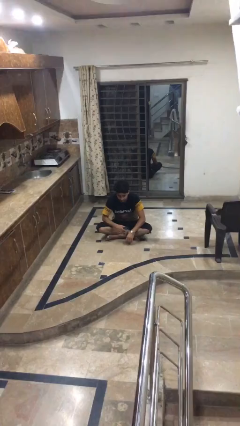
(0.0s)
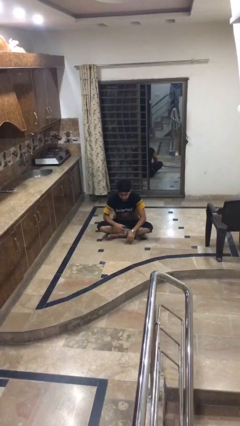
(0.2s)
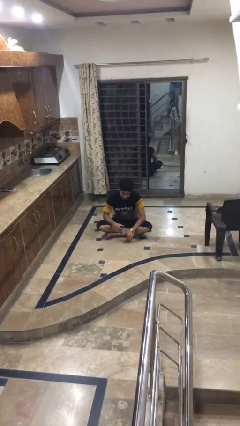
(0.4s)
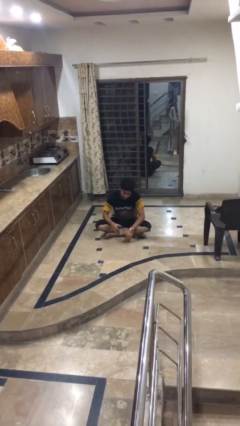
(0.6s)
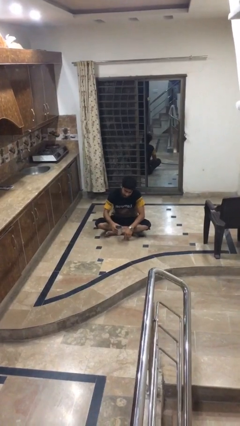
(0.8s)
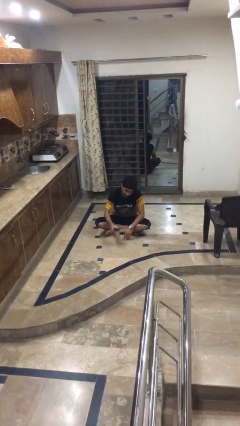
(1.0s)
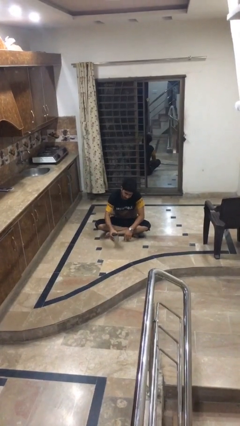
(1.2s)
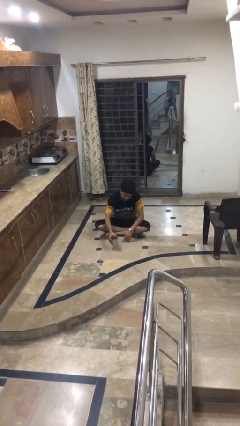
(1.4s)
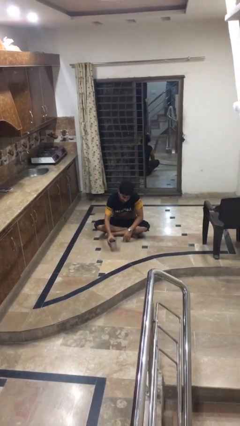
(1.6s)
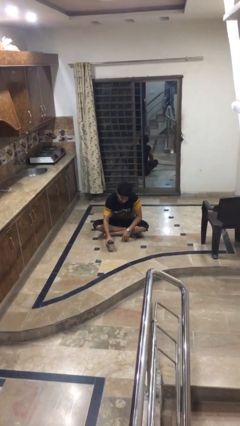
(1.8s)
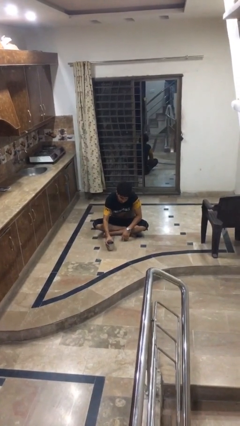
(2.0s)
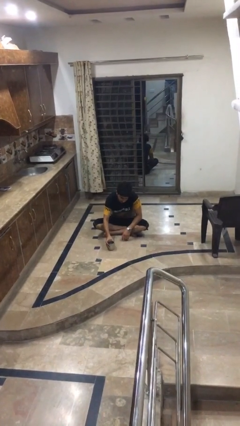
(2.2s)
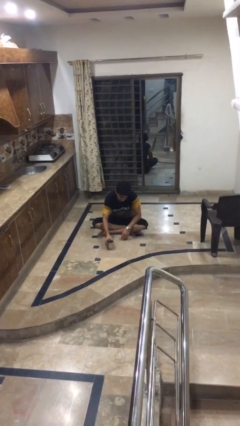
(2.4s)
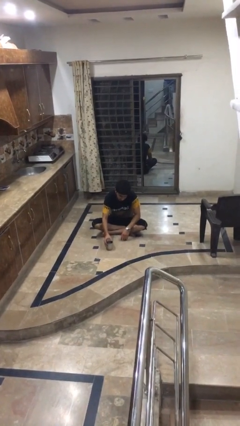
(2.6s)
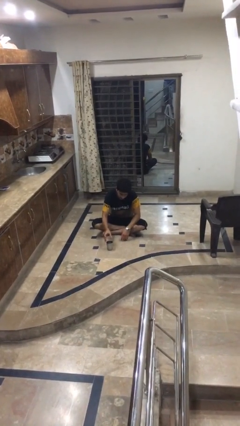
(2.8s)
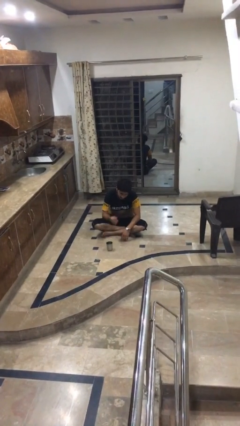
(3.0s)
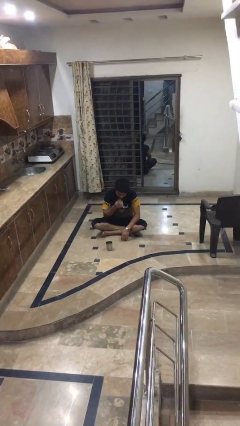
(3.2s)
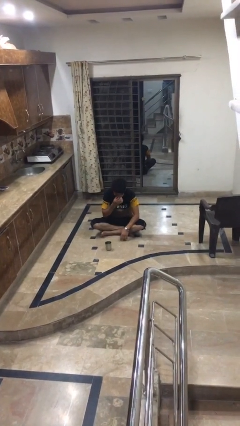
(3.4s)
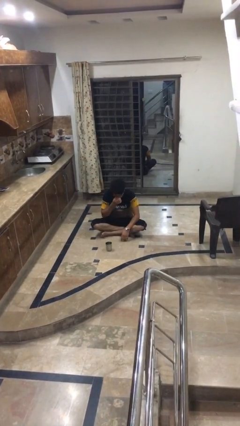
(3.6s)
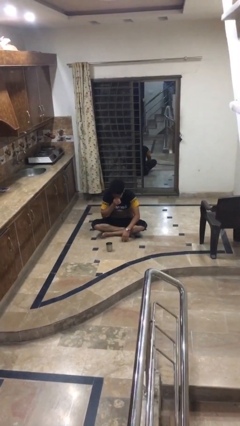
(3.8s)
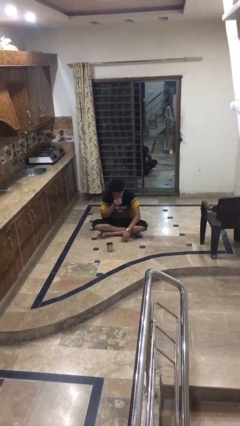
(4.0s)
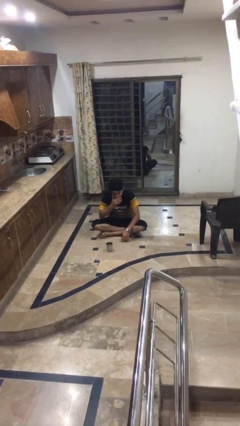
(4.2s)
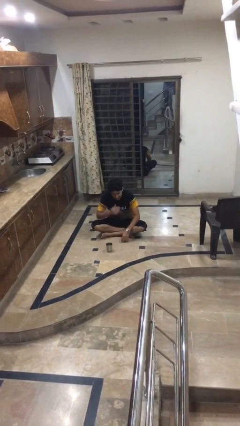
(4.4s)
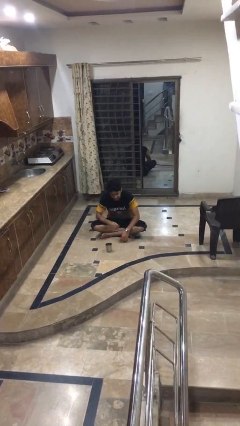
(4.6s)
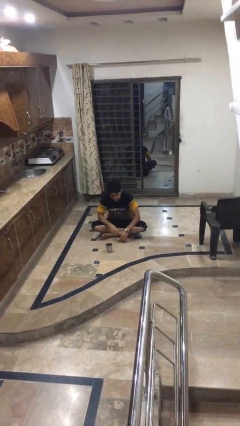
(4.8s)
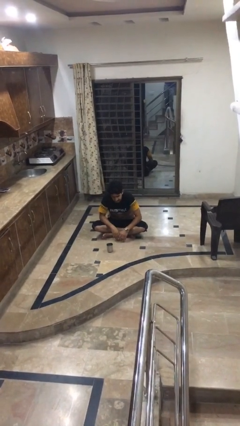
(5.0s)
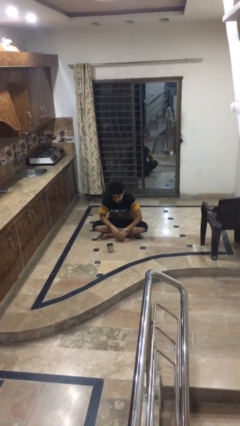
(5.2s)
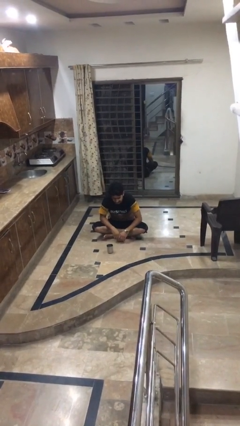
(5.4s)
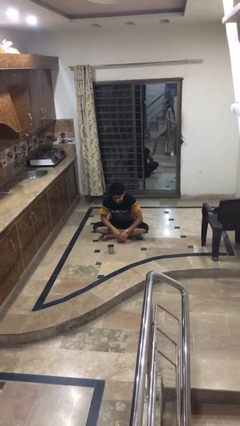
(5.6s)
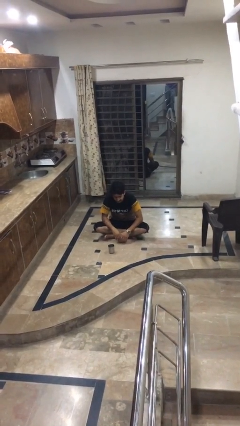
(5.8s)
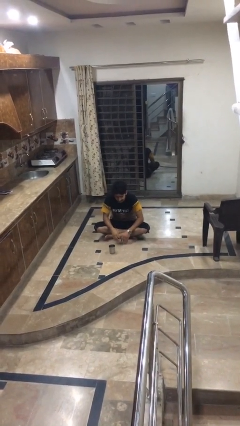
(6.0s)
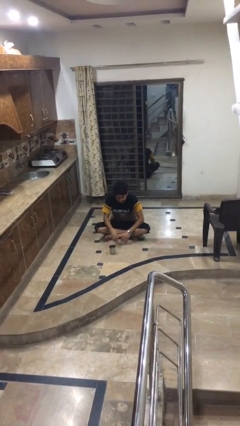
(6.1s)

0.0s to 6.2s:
person spills on floor

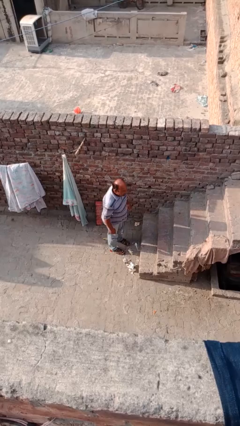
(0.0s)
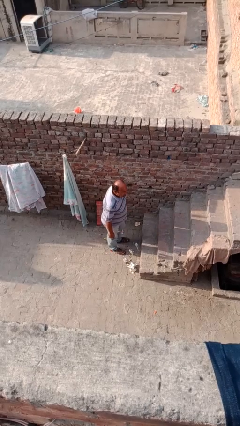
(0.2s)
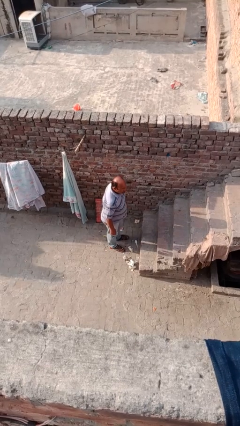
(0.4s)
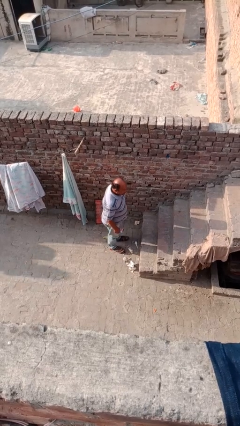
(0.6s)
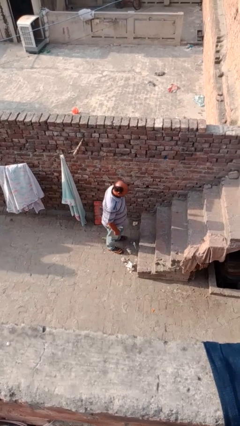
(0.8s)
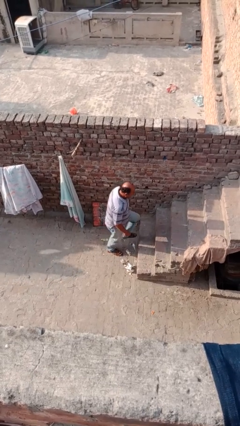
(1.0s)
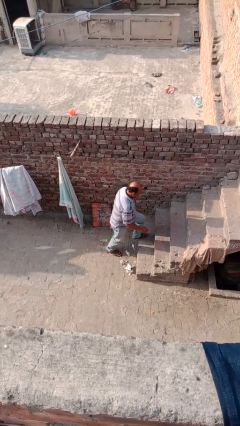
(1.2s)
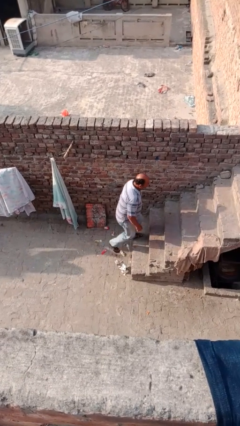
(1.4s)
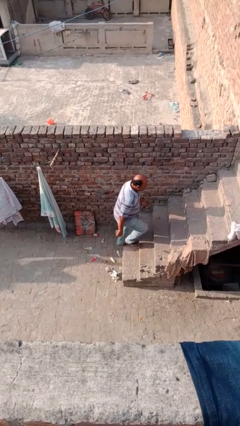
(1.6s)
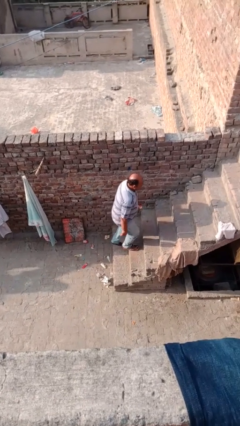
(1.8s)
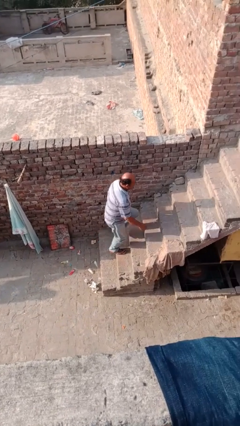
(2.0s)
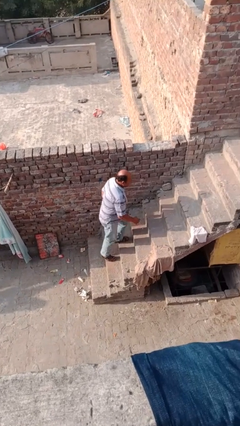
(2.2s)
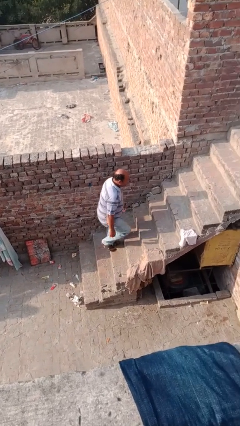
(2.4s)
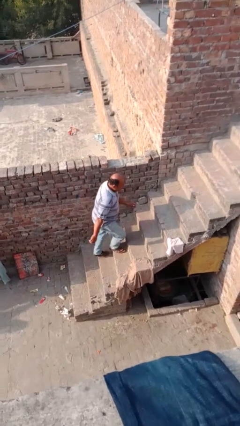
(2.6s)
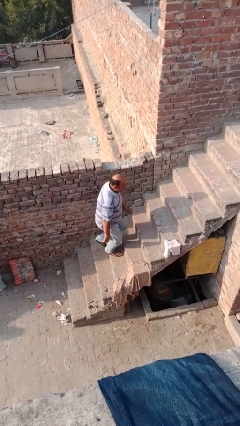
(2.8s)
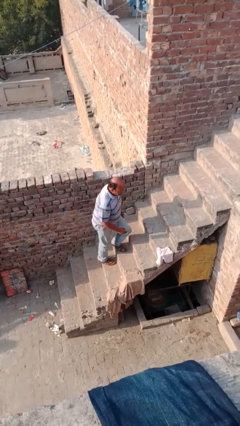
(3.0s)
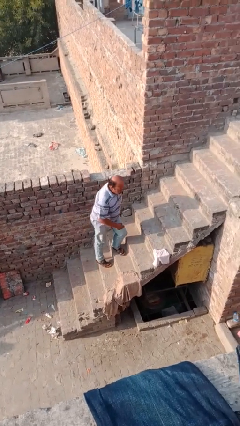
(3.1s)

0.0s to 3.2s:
person climbs up stairs

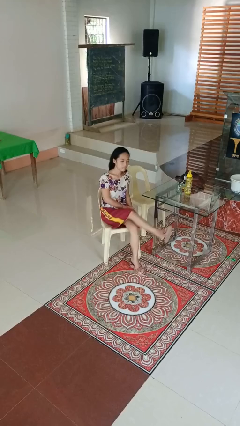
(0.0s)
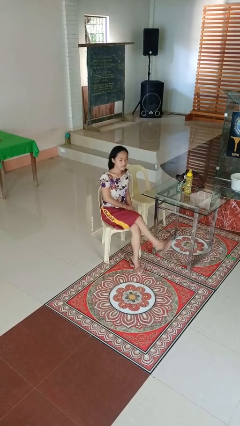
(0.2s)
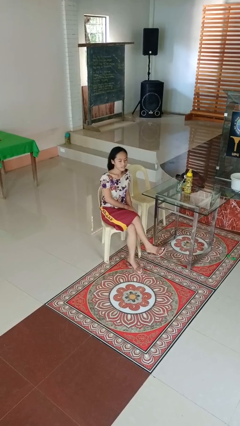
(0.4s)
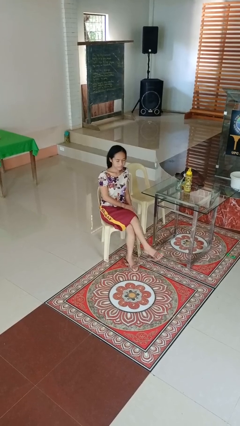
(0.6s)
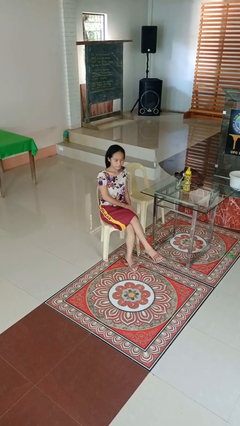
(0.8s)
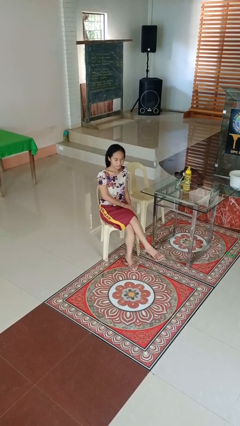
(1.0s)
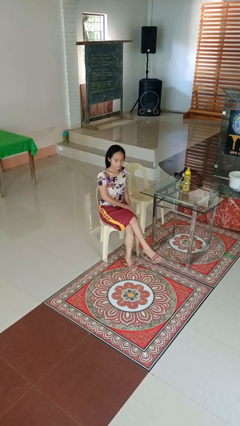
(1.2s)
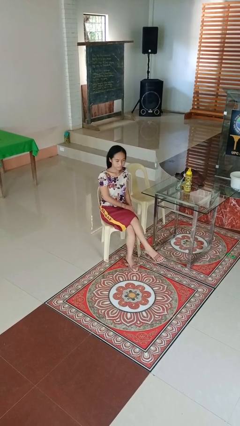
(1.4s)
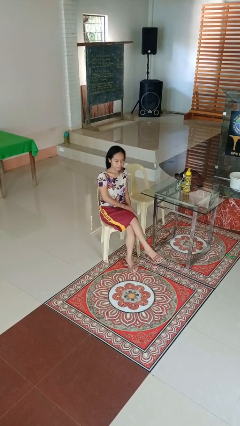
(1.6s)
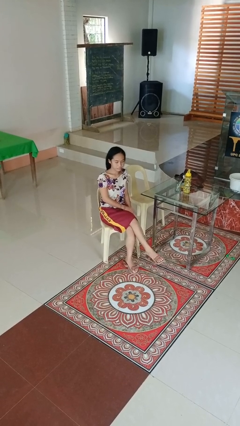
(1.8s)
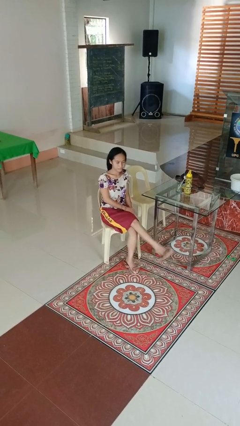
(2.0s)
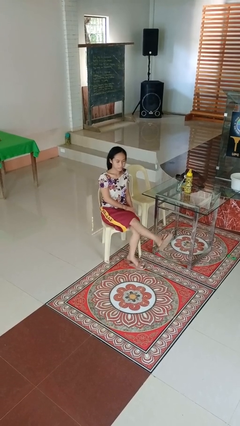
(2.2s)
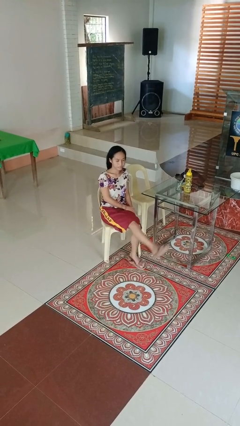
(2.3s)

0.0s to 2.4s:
person crosses legs

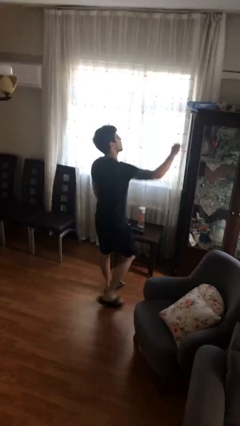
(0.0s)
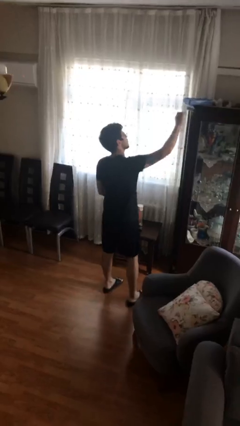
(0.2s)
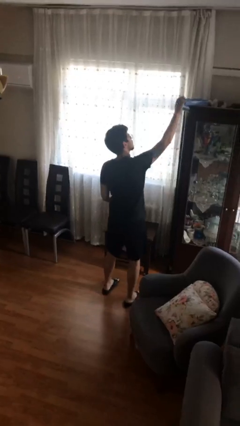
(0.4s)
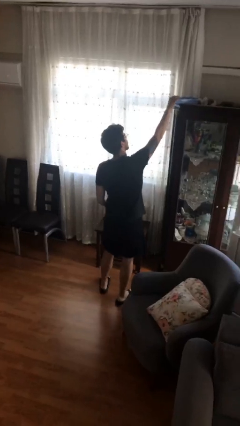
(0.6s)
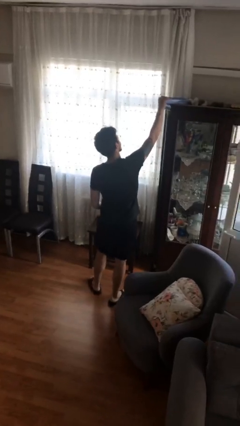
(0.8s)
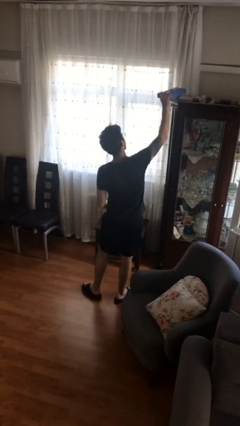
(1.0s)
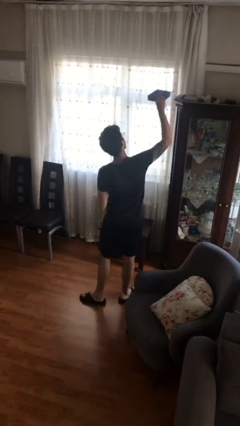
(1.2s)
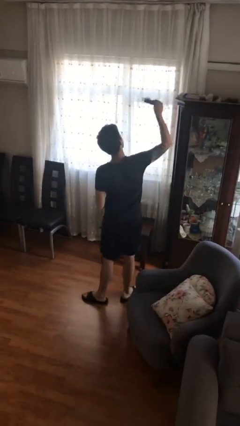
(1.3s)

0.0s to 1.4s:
person picks up object from shelf

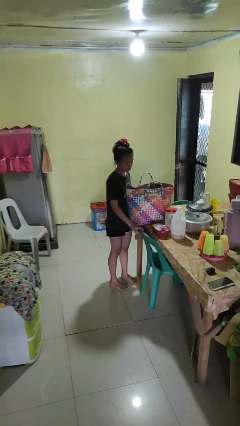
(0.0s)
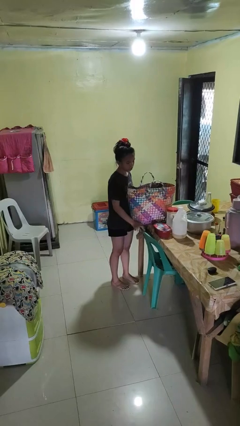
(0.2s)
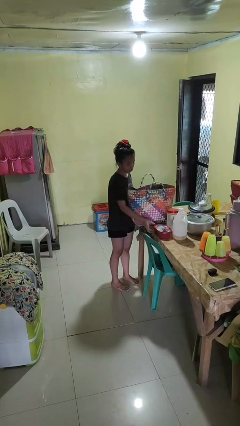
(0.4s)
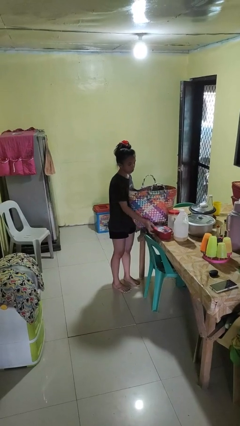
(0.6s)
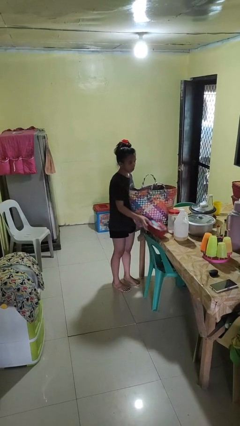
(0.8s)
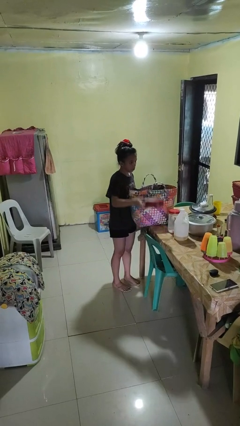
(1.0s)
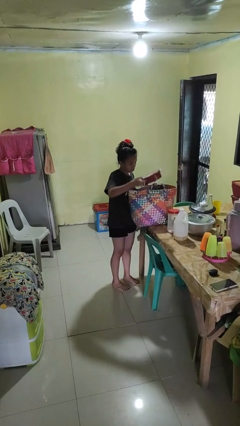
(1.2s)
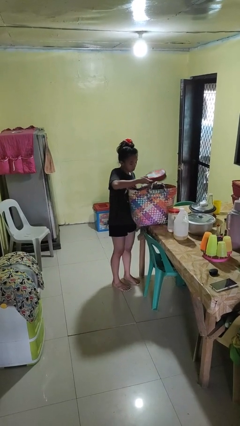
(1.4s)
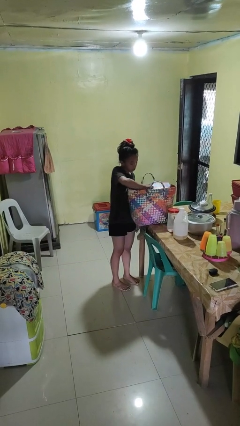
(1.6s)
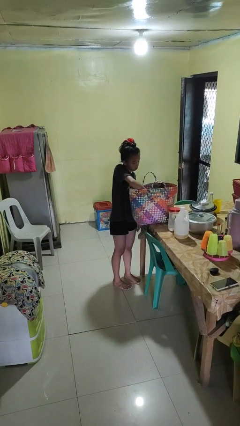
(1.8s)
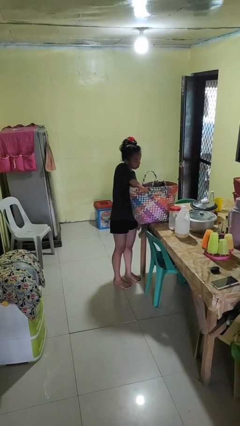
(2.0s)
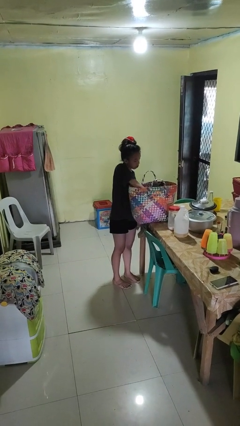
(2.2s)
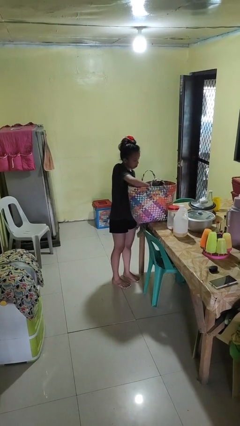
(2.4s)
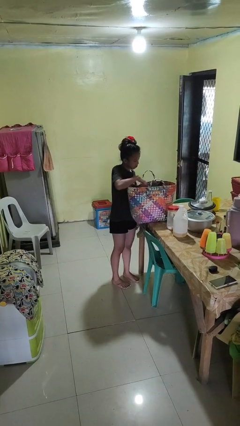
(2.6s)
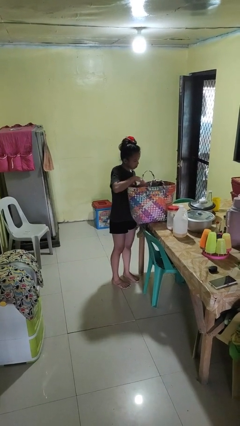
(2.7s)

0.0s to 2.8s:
person puts object into basket

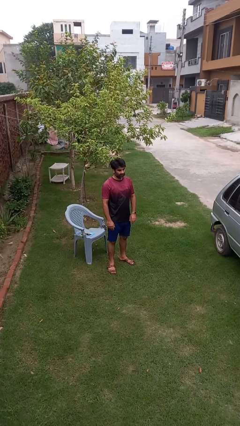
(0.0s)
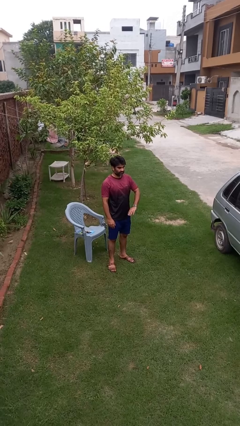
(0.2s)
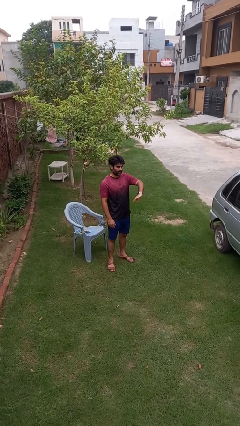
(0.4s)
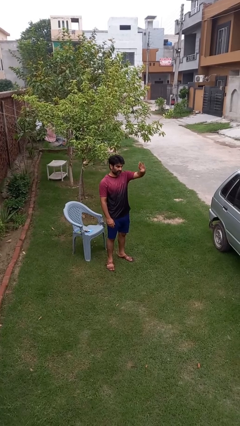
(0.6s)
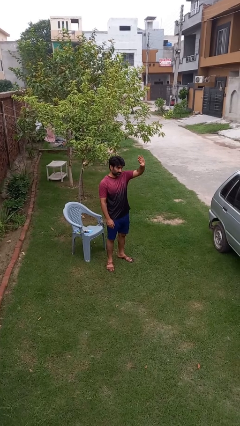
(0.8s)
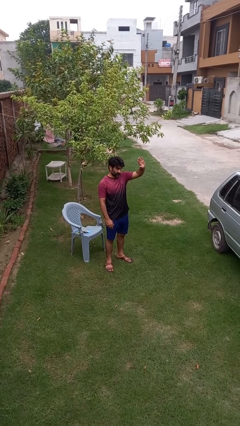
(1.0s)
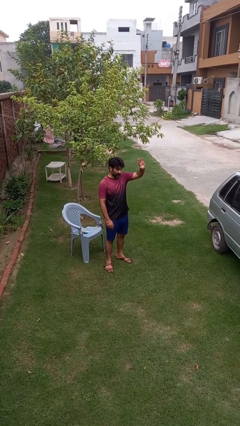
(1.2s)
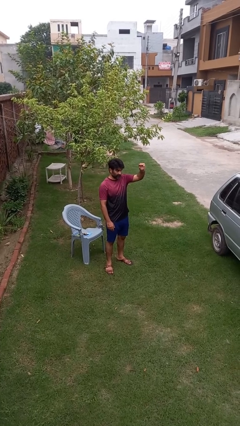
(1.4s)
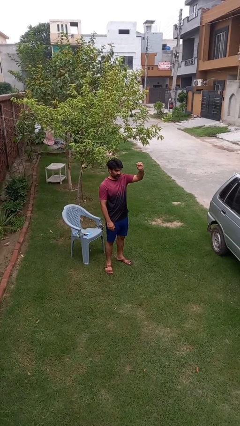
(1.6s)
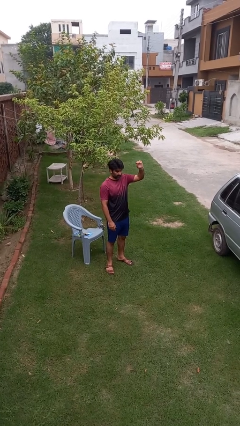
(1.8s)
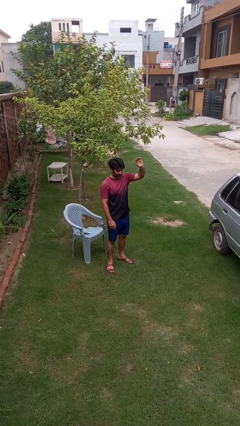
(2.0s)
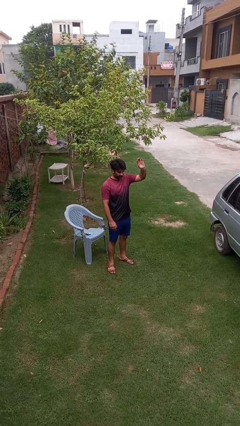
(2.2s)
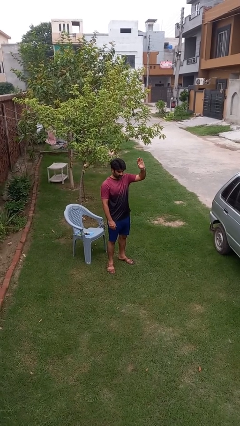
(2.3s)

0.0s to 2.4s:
person gestures swipe up
